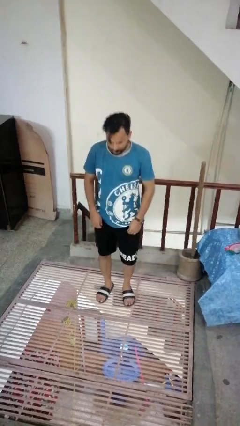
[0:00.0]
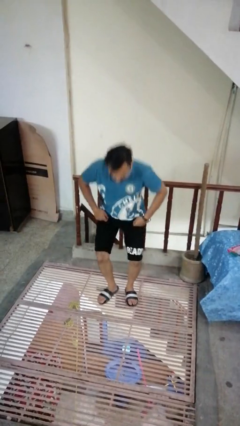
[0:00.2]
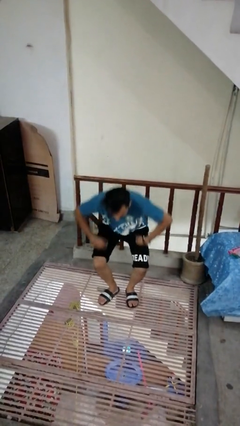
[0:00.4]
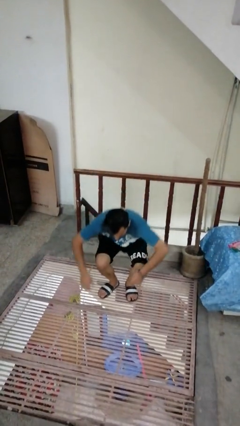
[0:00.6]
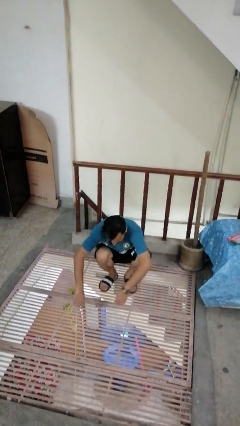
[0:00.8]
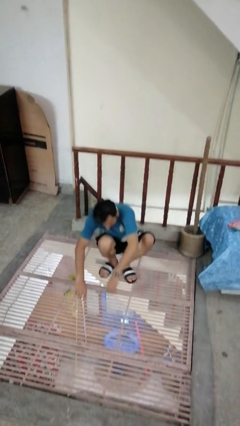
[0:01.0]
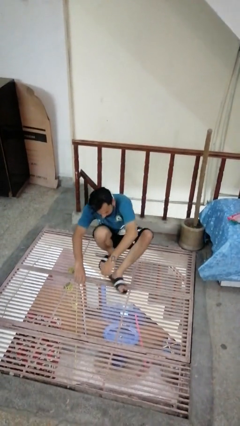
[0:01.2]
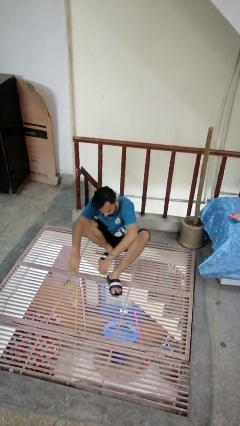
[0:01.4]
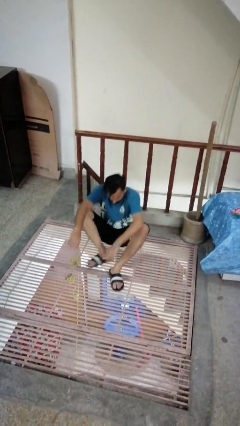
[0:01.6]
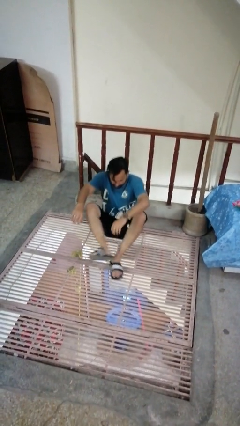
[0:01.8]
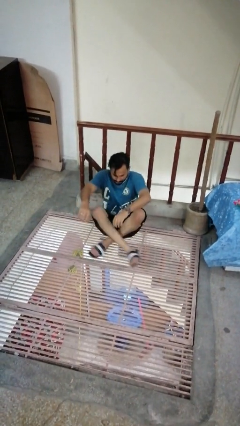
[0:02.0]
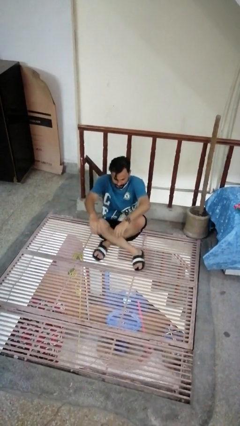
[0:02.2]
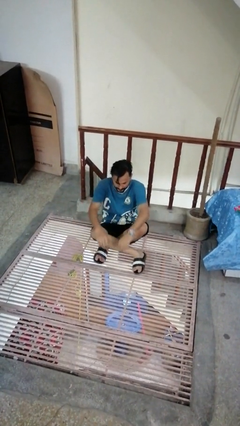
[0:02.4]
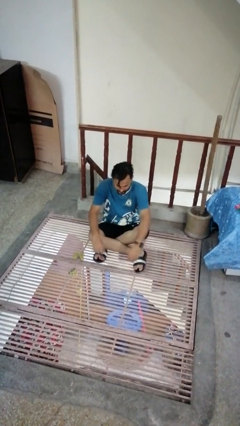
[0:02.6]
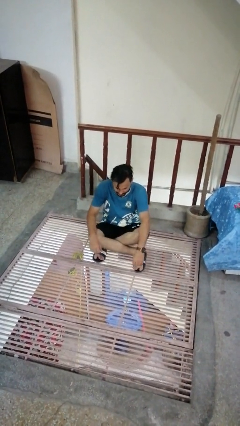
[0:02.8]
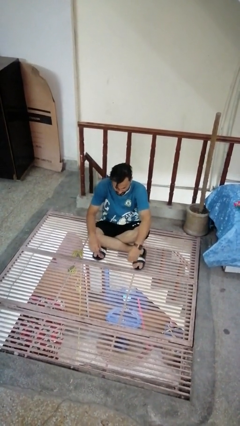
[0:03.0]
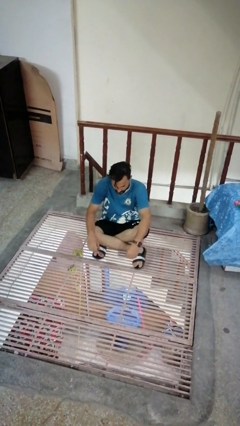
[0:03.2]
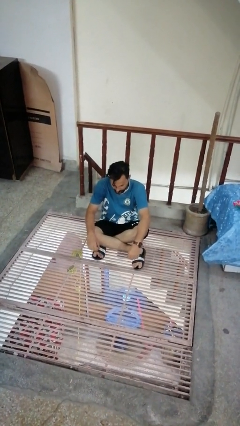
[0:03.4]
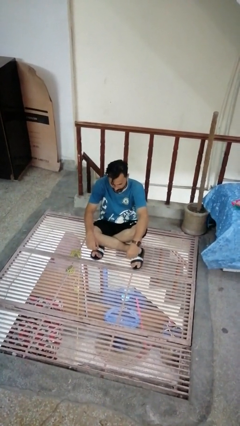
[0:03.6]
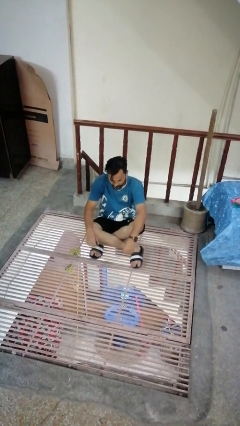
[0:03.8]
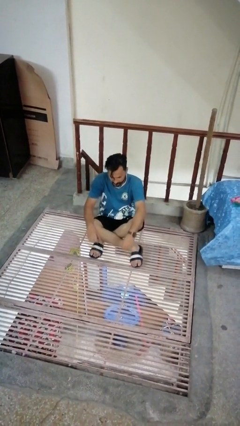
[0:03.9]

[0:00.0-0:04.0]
person sits crisscross

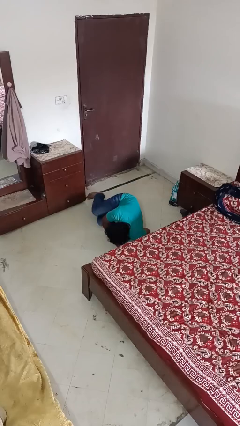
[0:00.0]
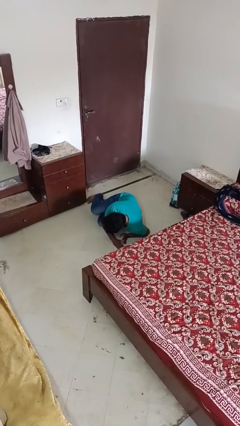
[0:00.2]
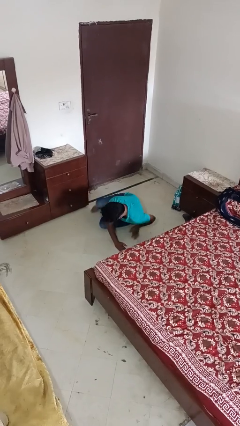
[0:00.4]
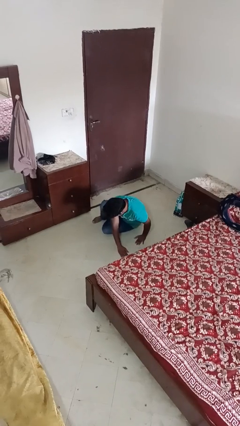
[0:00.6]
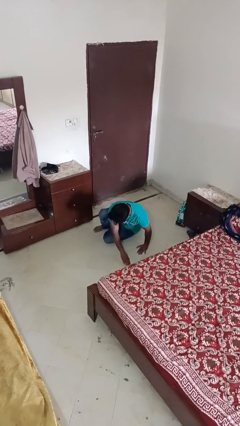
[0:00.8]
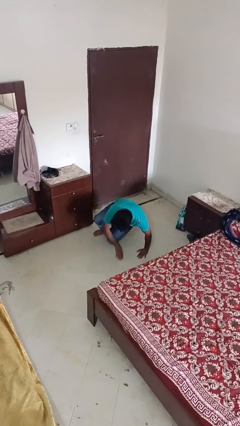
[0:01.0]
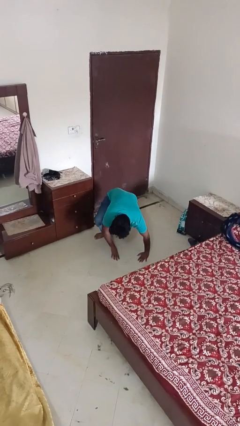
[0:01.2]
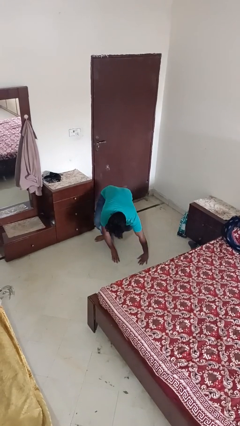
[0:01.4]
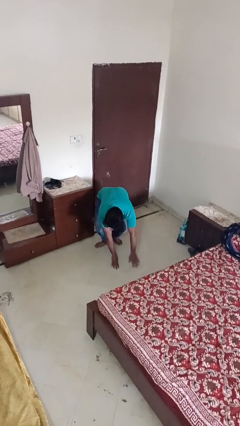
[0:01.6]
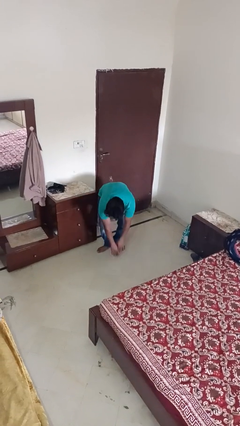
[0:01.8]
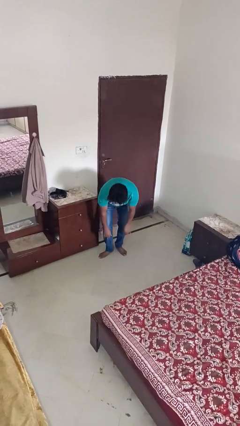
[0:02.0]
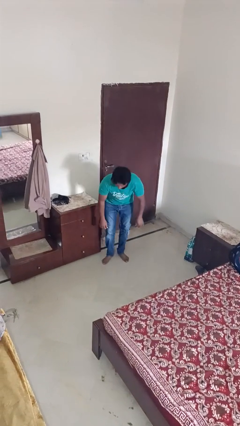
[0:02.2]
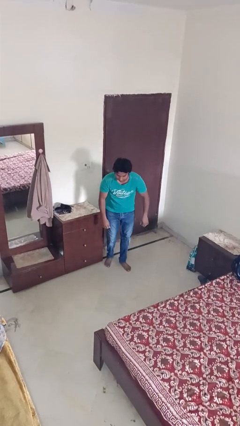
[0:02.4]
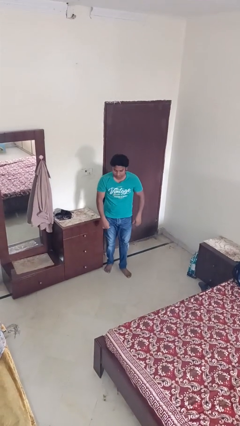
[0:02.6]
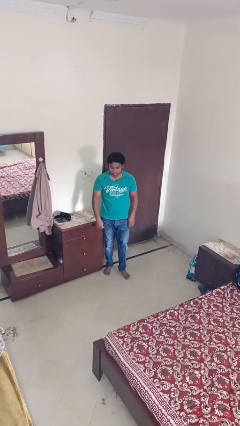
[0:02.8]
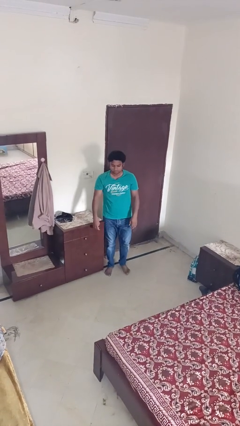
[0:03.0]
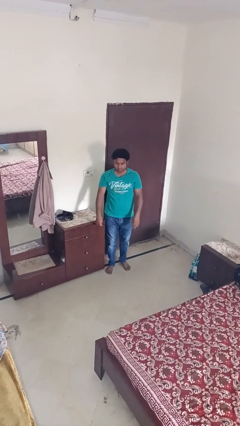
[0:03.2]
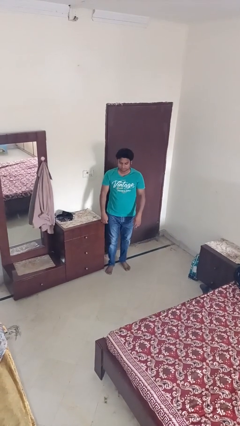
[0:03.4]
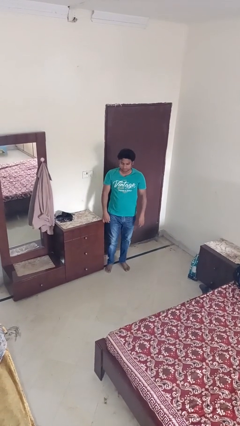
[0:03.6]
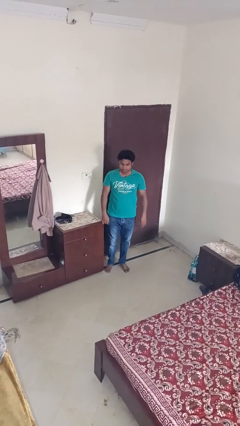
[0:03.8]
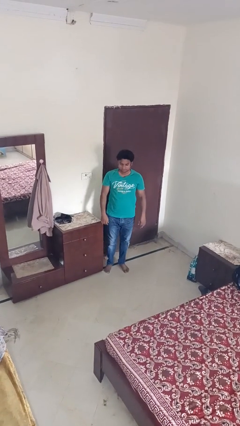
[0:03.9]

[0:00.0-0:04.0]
person stands up from floor

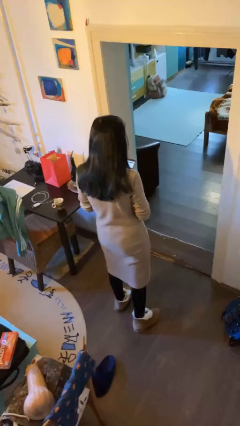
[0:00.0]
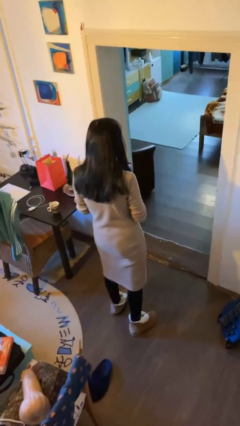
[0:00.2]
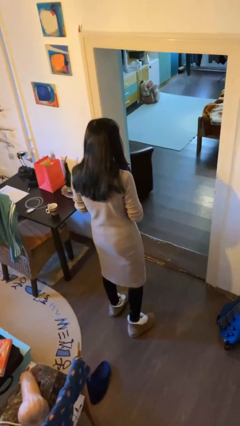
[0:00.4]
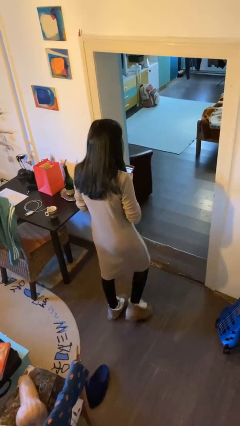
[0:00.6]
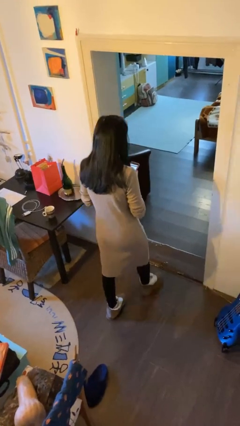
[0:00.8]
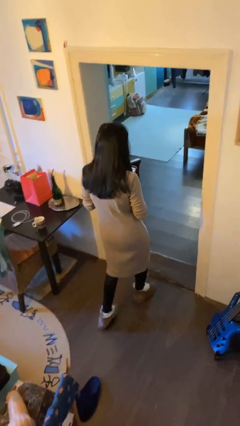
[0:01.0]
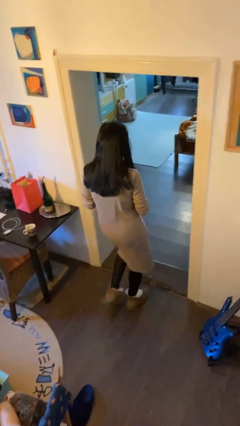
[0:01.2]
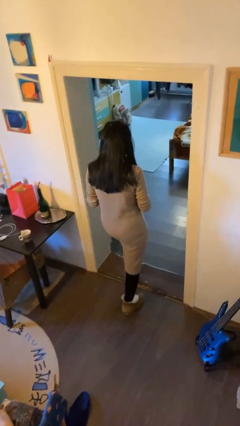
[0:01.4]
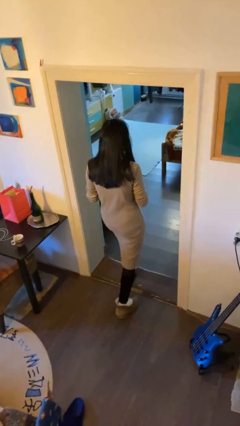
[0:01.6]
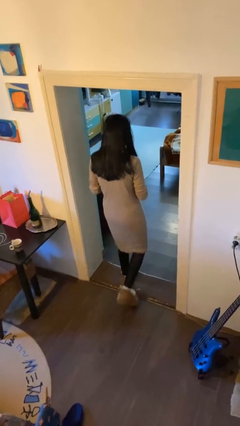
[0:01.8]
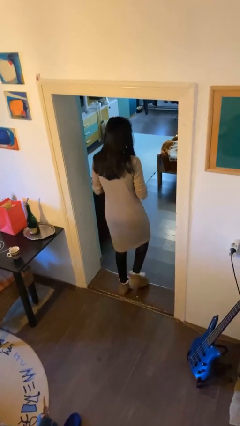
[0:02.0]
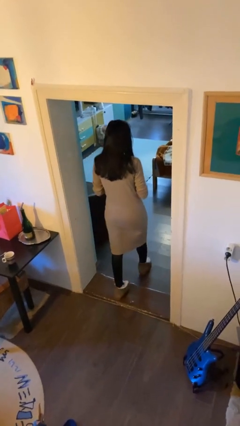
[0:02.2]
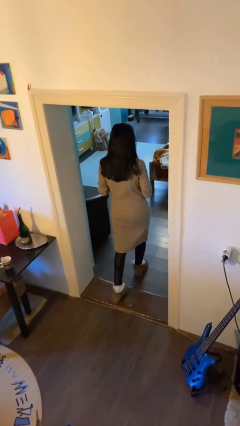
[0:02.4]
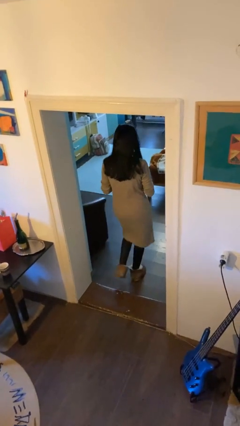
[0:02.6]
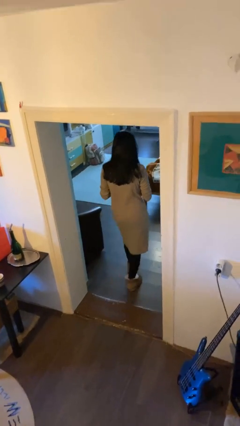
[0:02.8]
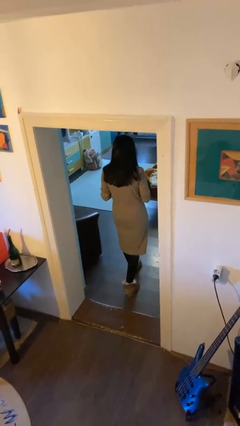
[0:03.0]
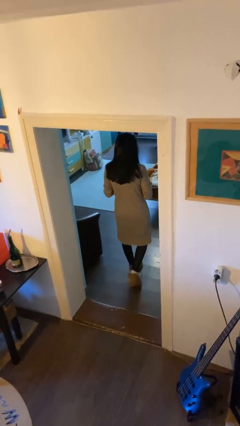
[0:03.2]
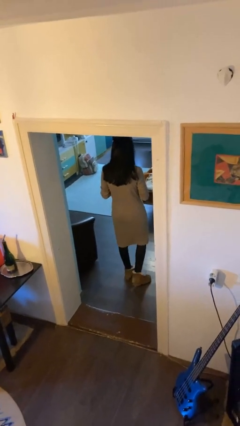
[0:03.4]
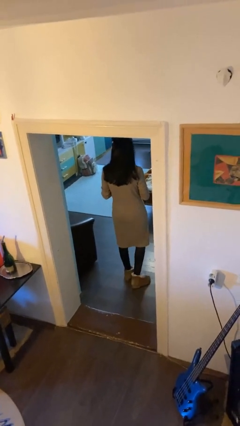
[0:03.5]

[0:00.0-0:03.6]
person exits scene through structure

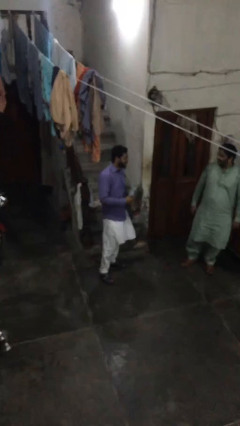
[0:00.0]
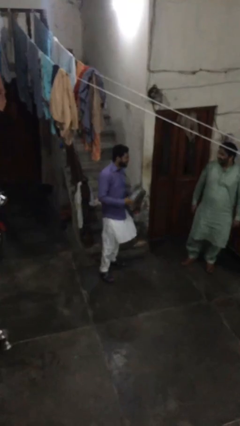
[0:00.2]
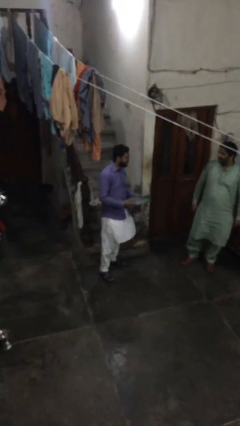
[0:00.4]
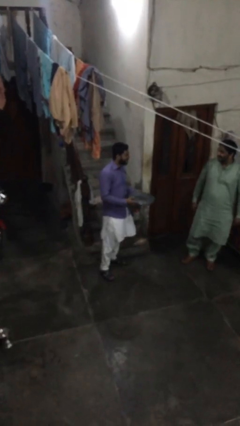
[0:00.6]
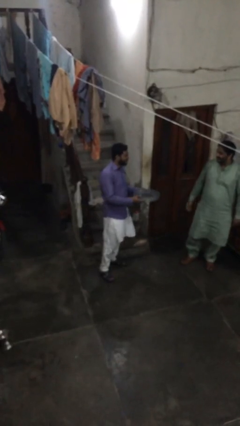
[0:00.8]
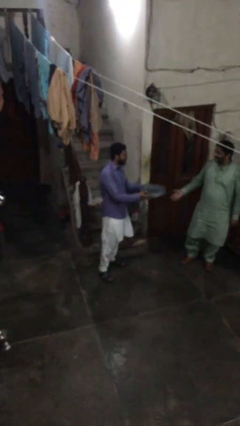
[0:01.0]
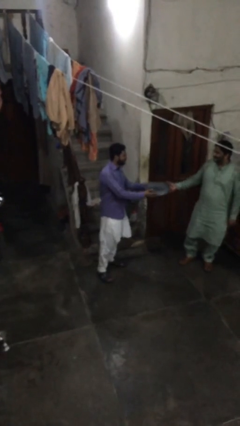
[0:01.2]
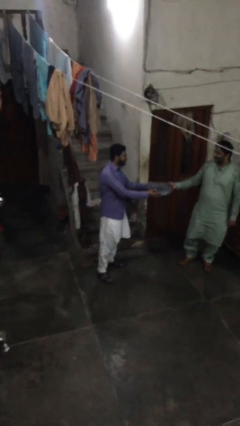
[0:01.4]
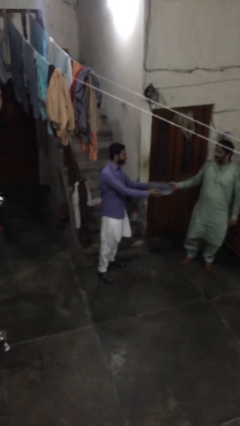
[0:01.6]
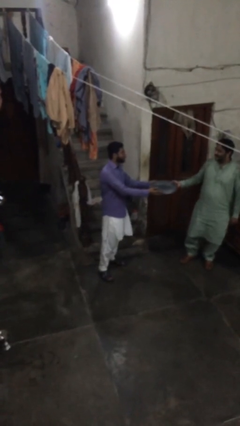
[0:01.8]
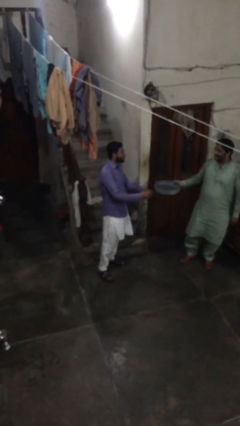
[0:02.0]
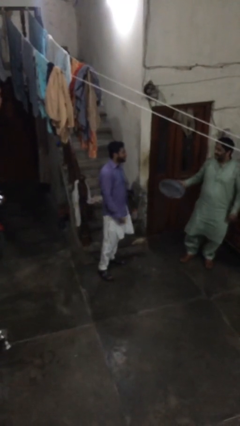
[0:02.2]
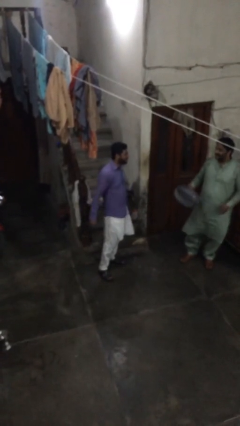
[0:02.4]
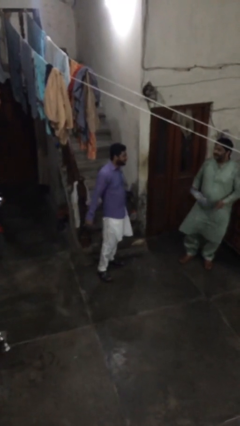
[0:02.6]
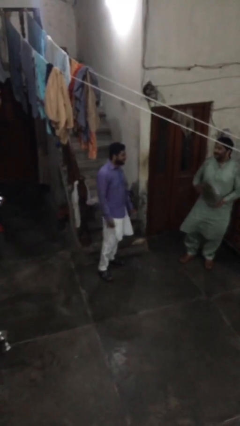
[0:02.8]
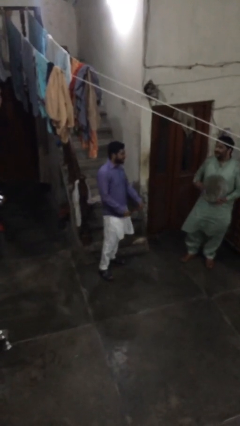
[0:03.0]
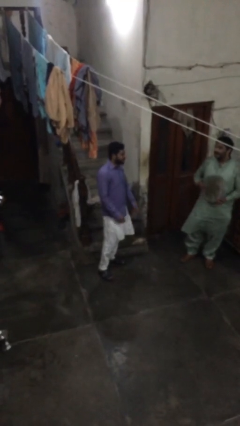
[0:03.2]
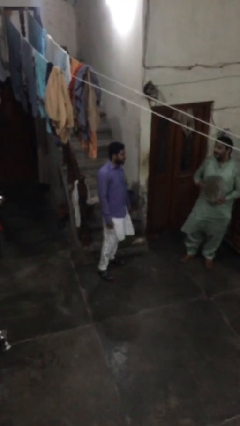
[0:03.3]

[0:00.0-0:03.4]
person transfers object to person

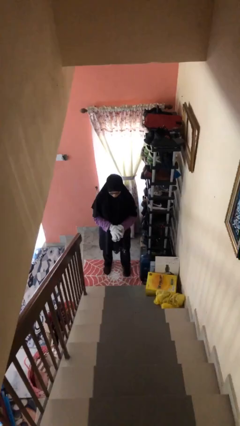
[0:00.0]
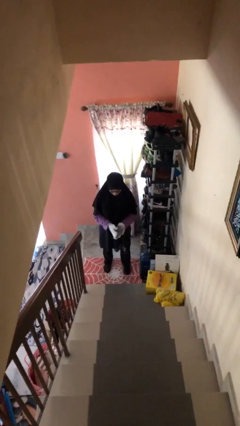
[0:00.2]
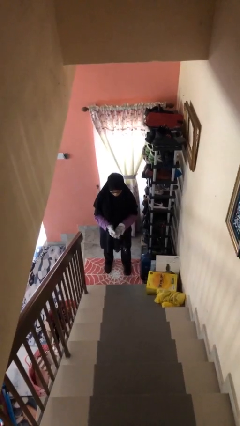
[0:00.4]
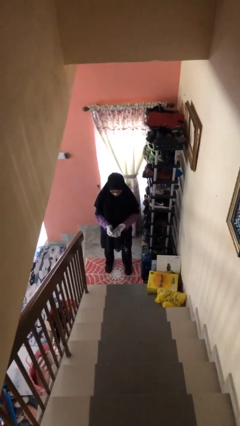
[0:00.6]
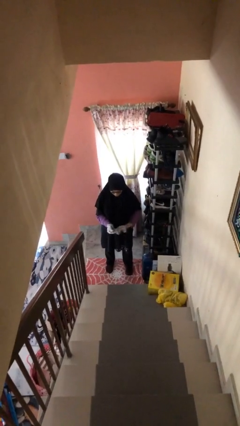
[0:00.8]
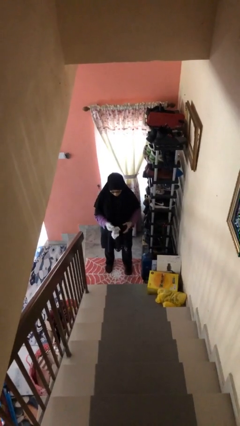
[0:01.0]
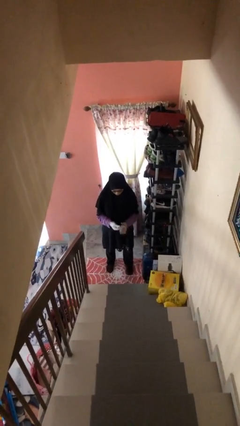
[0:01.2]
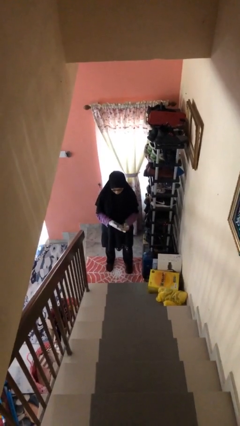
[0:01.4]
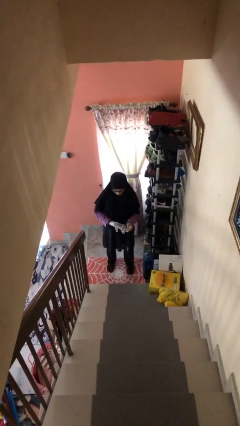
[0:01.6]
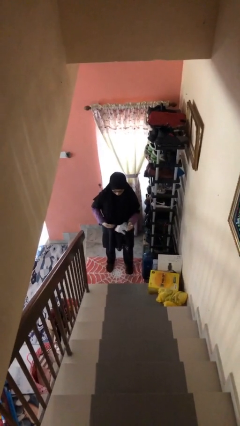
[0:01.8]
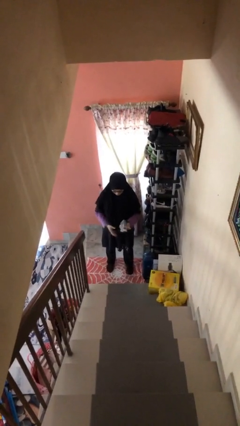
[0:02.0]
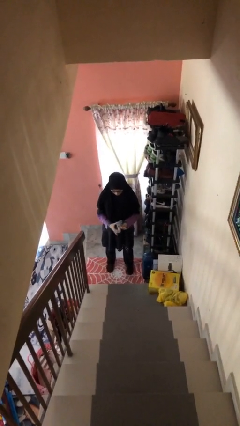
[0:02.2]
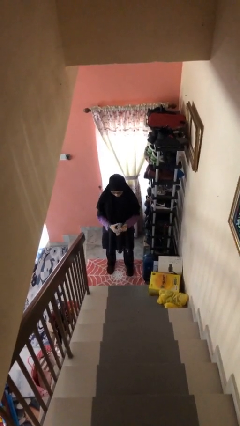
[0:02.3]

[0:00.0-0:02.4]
person takes off gloves
